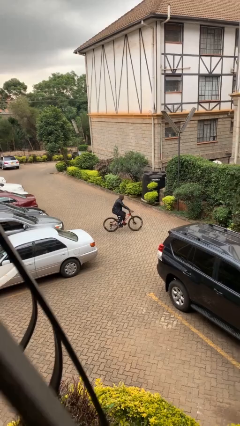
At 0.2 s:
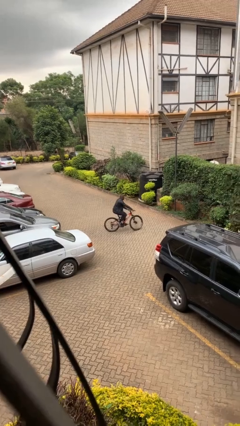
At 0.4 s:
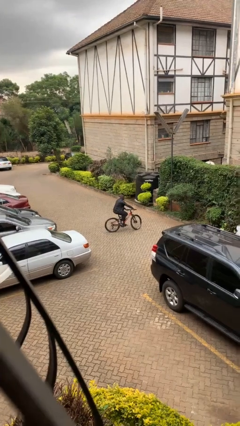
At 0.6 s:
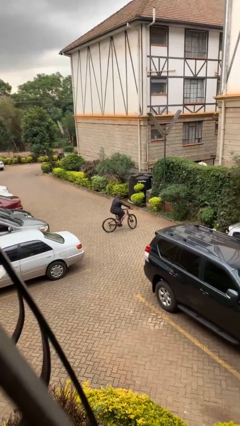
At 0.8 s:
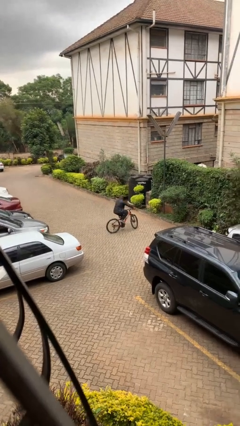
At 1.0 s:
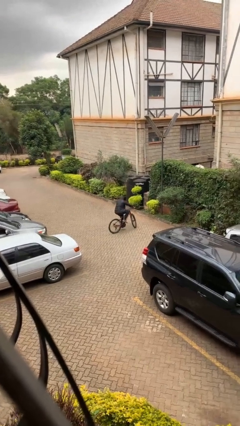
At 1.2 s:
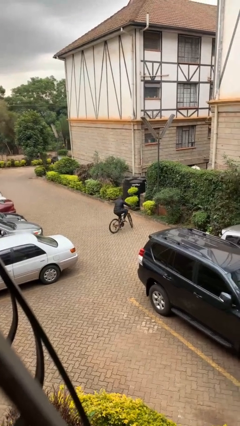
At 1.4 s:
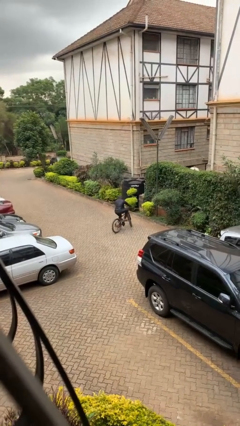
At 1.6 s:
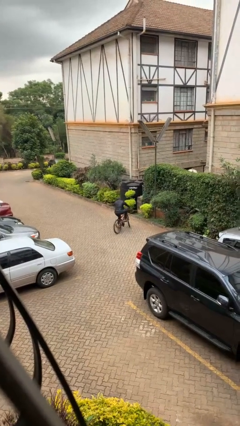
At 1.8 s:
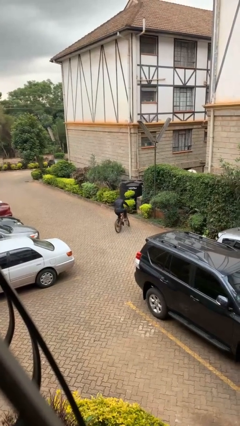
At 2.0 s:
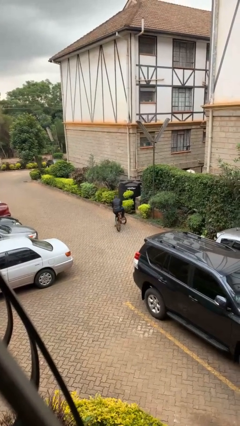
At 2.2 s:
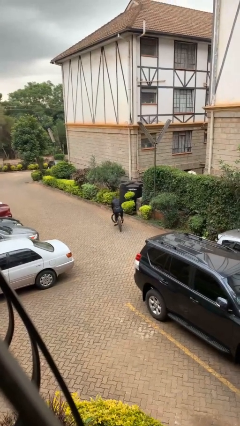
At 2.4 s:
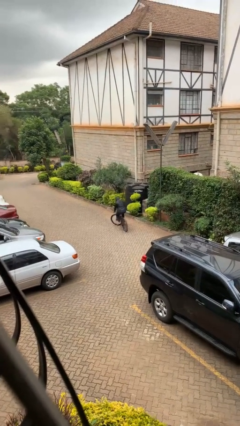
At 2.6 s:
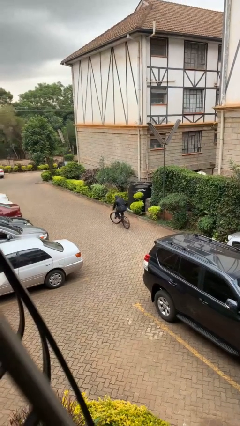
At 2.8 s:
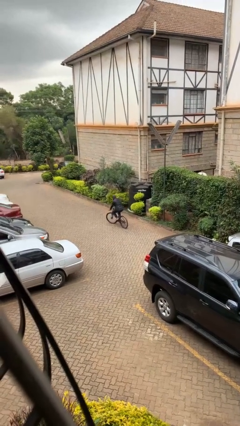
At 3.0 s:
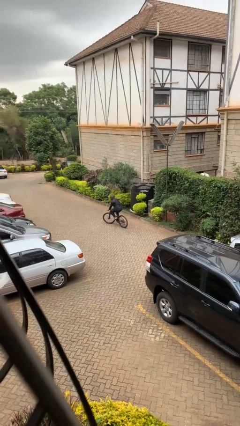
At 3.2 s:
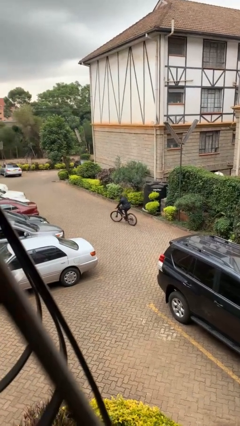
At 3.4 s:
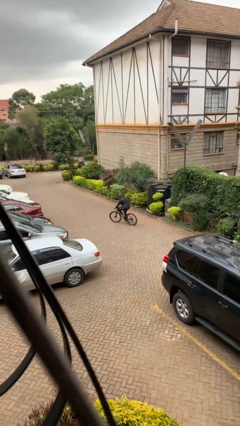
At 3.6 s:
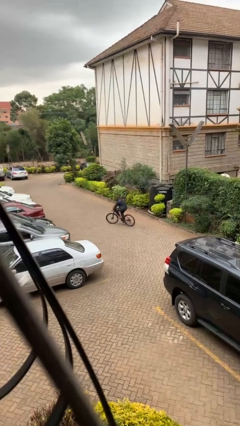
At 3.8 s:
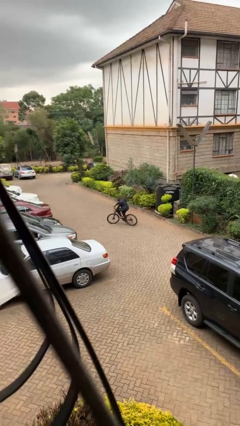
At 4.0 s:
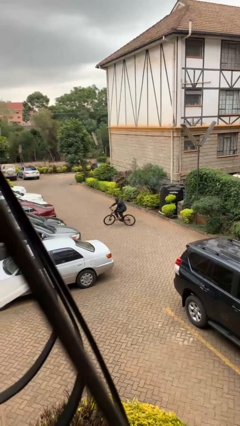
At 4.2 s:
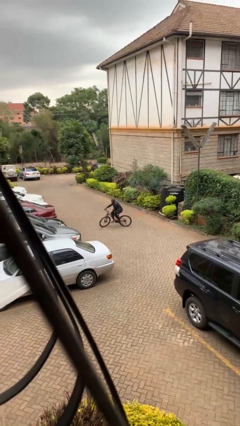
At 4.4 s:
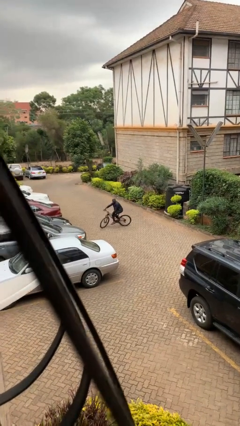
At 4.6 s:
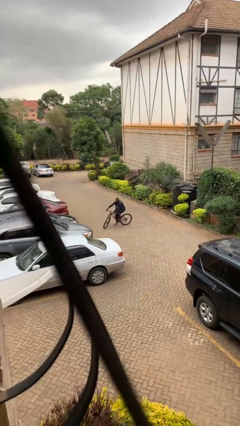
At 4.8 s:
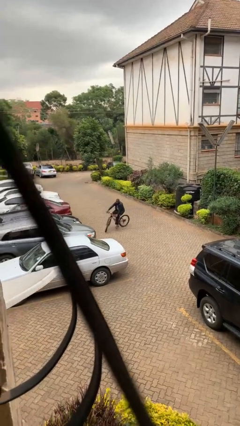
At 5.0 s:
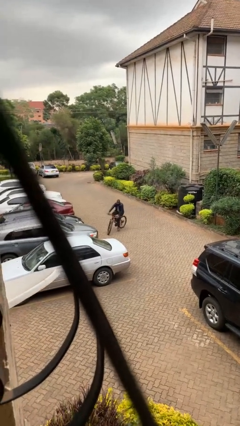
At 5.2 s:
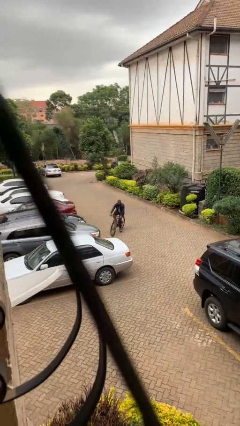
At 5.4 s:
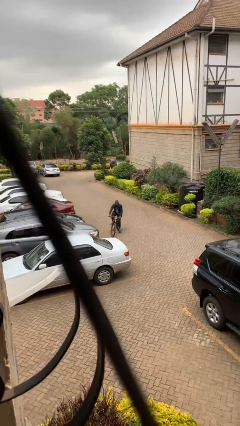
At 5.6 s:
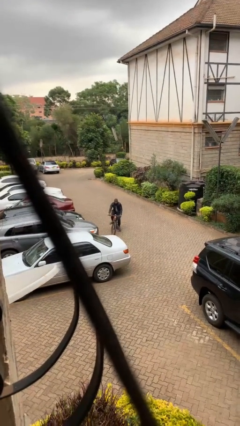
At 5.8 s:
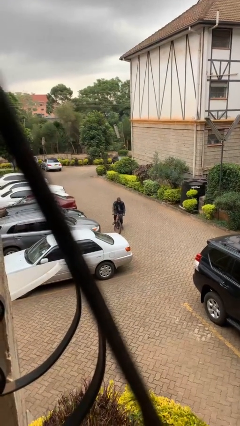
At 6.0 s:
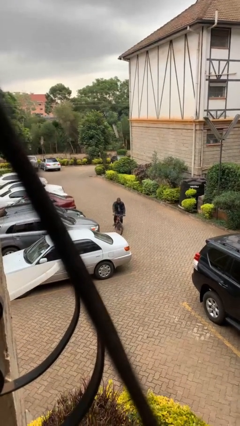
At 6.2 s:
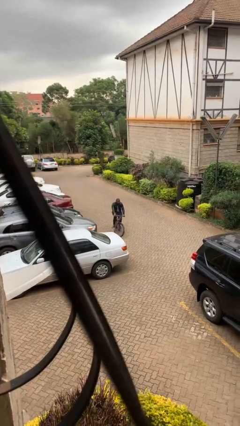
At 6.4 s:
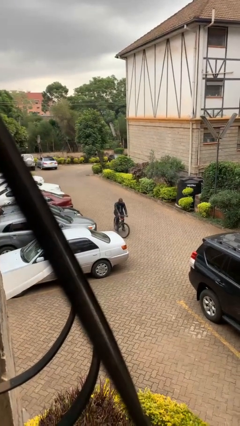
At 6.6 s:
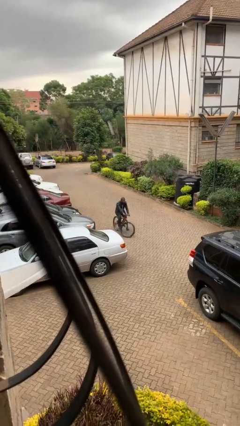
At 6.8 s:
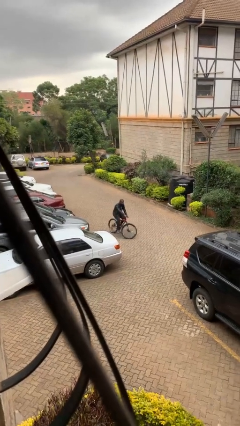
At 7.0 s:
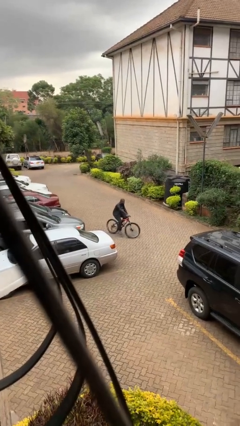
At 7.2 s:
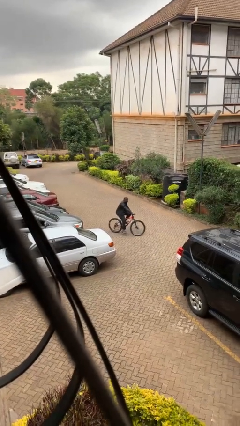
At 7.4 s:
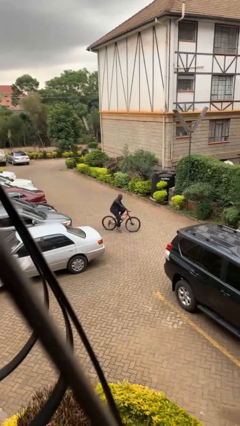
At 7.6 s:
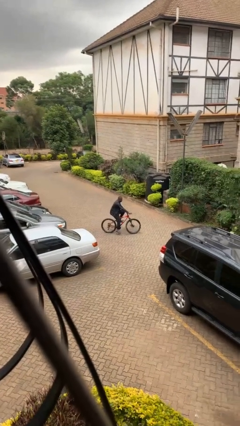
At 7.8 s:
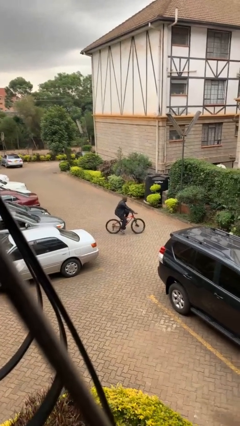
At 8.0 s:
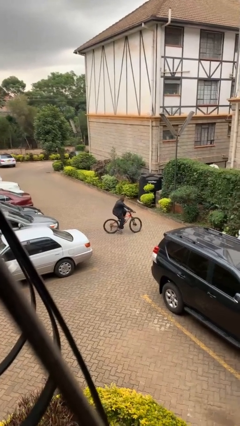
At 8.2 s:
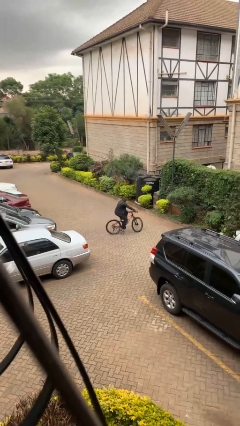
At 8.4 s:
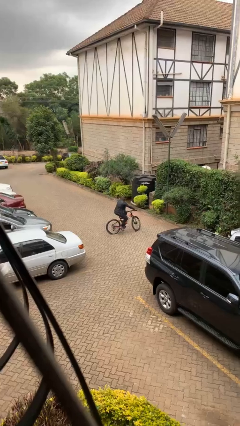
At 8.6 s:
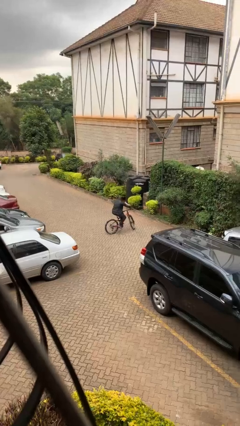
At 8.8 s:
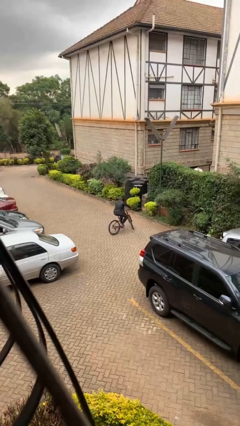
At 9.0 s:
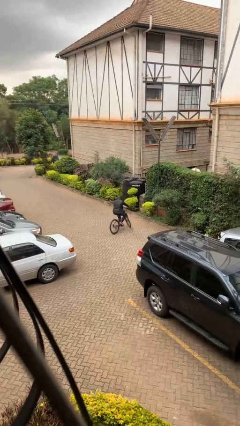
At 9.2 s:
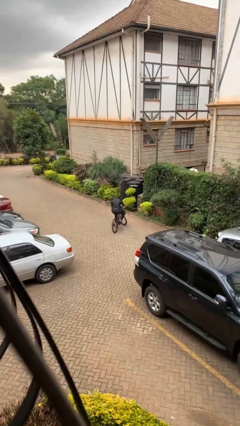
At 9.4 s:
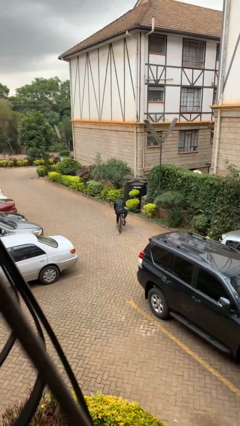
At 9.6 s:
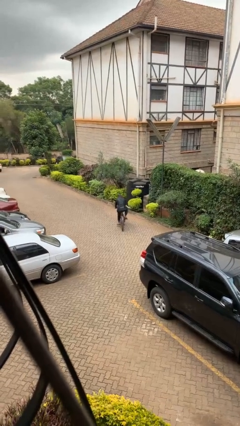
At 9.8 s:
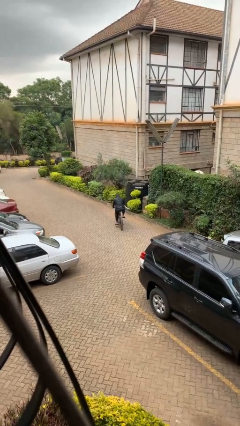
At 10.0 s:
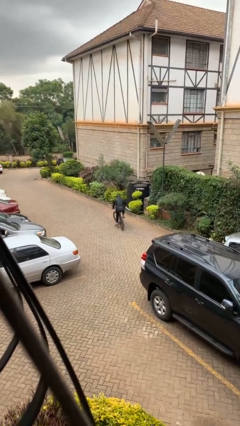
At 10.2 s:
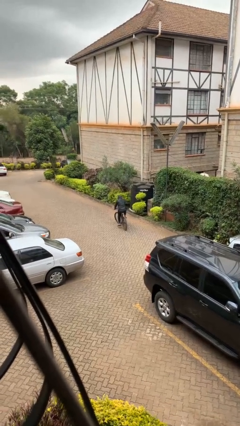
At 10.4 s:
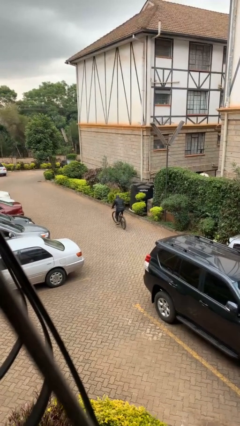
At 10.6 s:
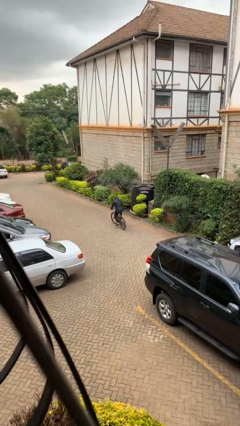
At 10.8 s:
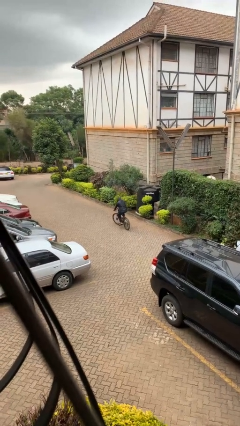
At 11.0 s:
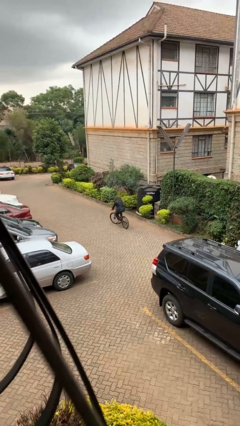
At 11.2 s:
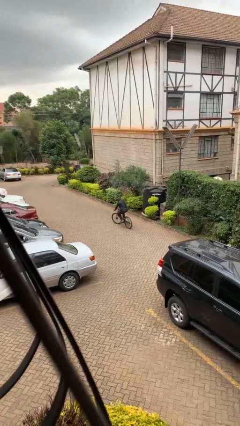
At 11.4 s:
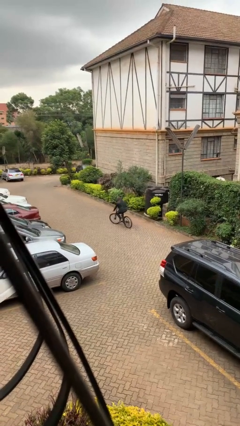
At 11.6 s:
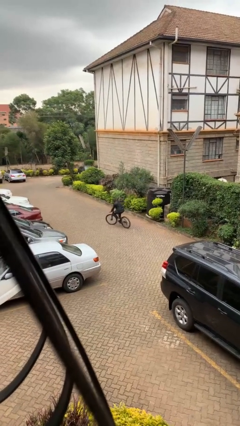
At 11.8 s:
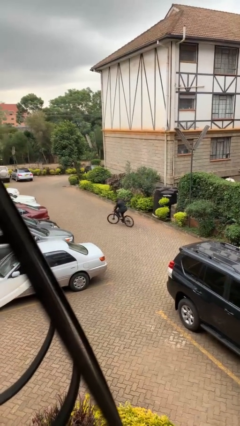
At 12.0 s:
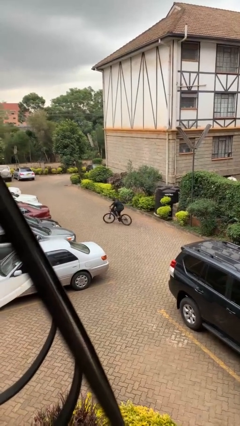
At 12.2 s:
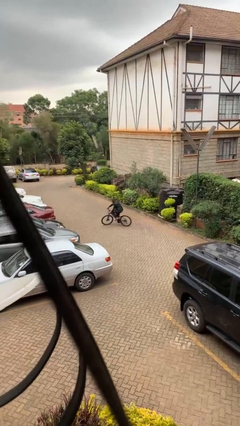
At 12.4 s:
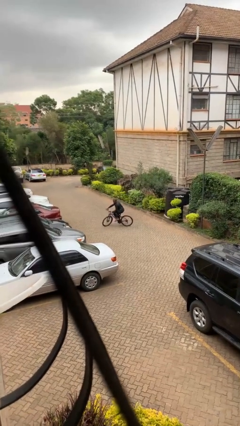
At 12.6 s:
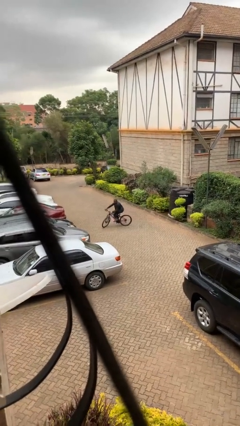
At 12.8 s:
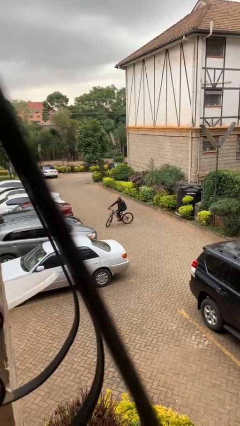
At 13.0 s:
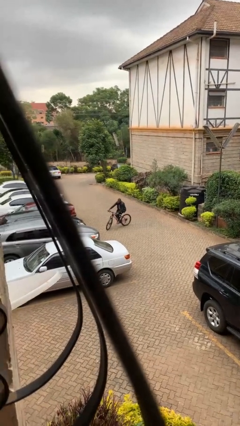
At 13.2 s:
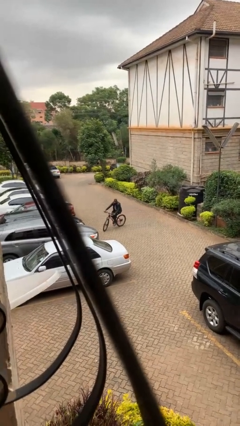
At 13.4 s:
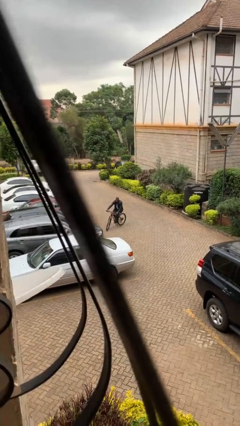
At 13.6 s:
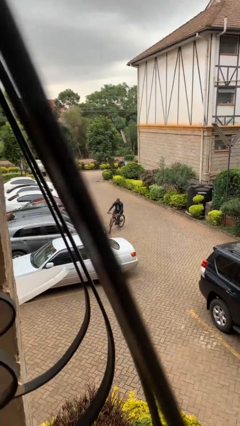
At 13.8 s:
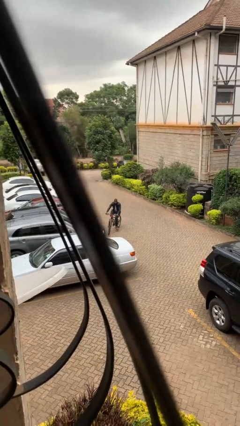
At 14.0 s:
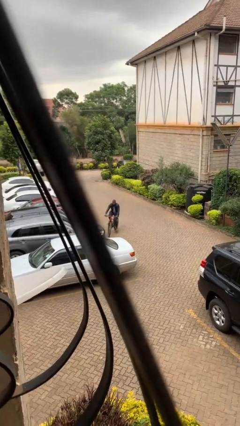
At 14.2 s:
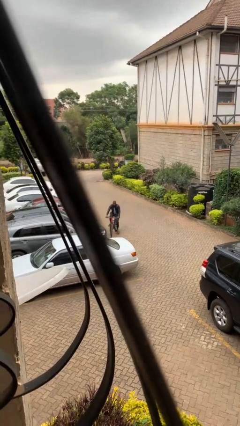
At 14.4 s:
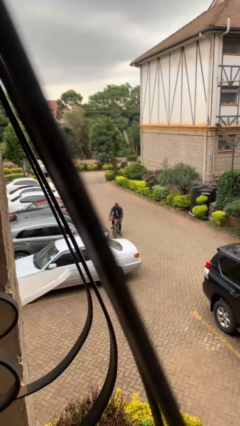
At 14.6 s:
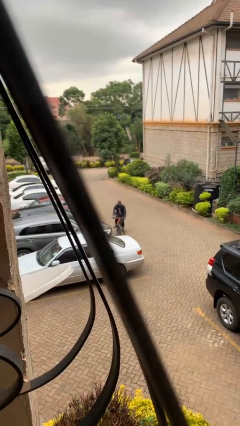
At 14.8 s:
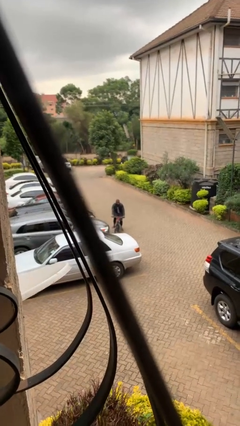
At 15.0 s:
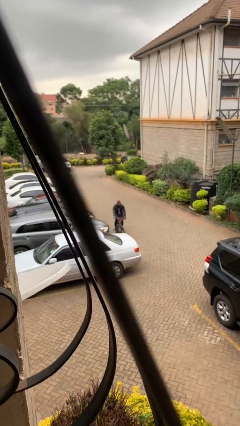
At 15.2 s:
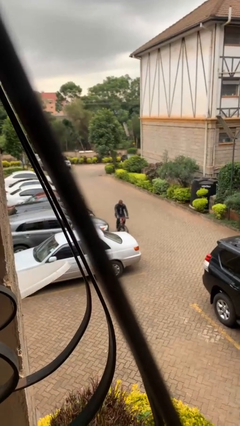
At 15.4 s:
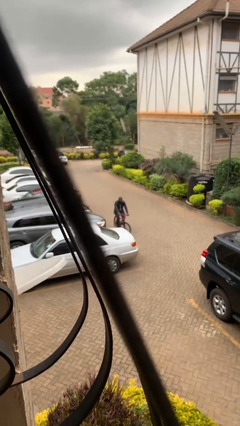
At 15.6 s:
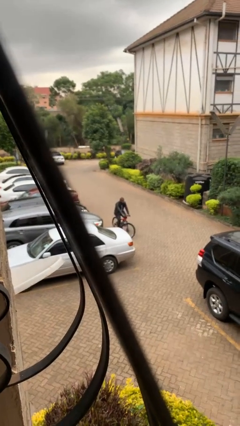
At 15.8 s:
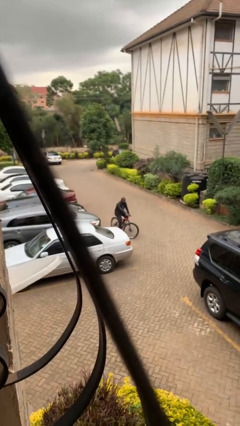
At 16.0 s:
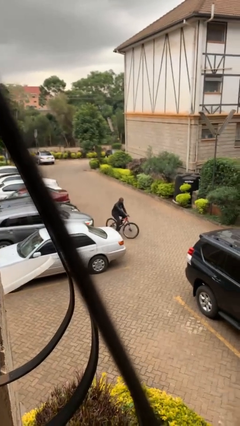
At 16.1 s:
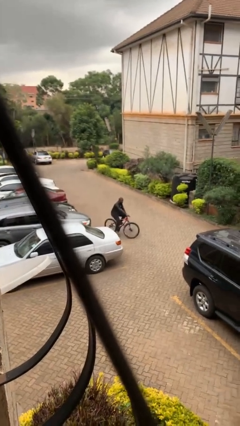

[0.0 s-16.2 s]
person rides bicycle

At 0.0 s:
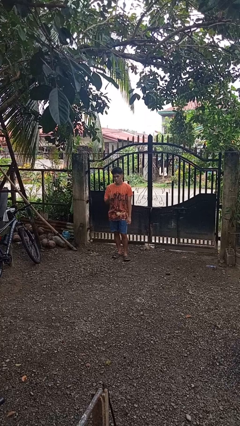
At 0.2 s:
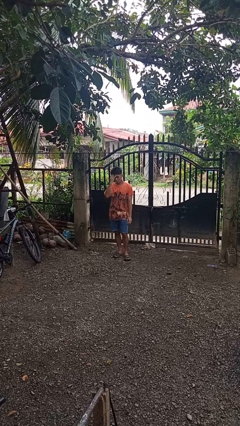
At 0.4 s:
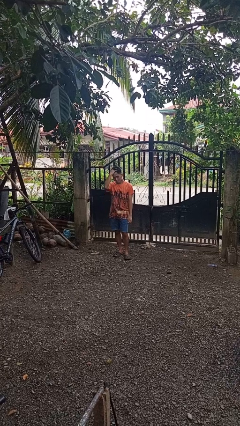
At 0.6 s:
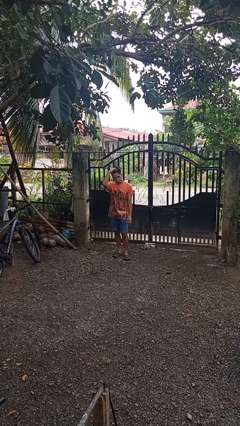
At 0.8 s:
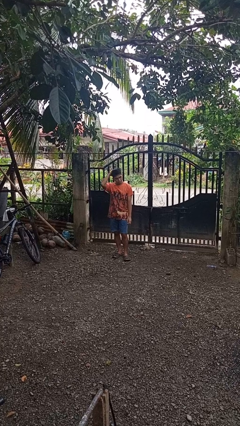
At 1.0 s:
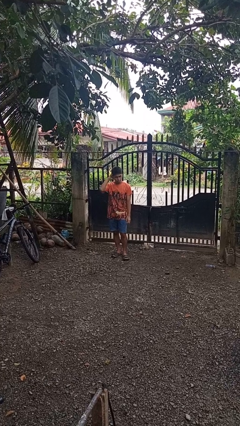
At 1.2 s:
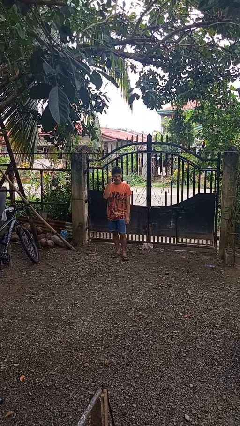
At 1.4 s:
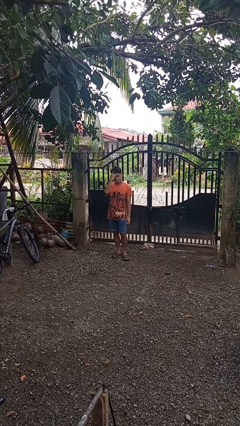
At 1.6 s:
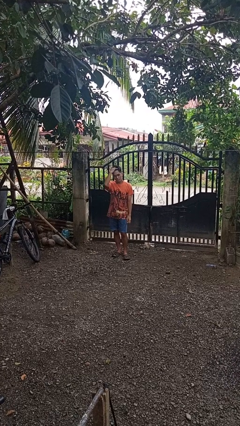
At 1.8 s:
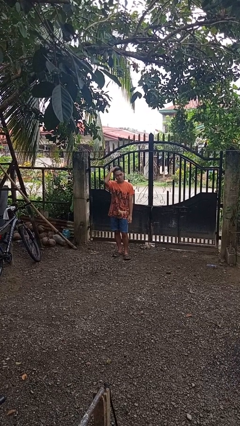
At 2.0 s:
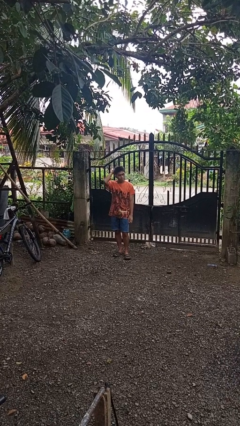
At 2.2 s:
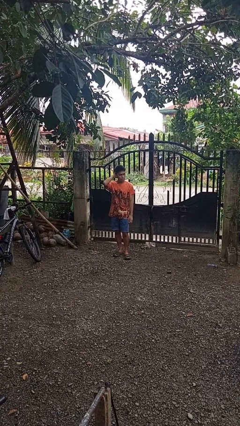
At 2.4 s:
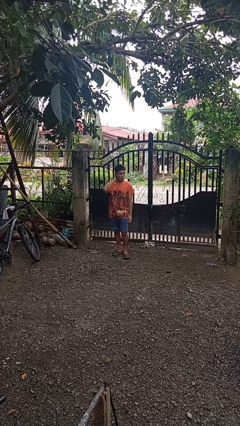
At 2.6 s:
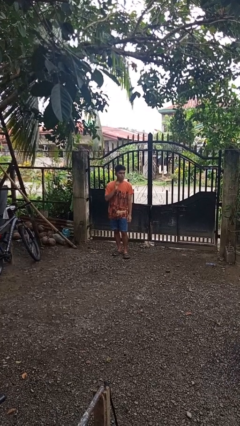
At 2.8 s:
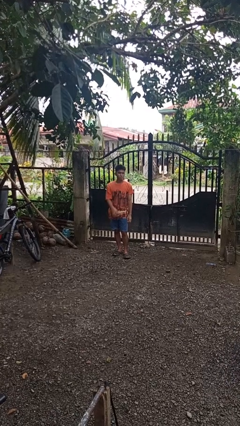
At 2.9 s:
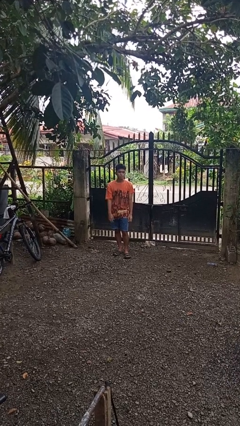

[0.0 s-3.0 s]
person strokes hair
